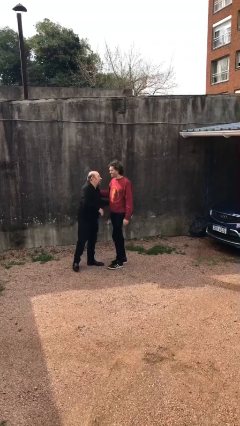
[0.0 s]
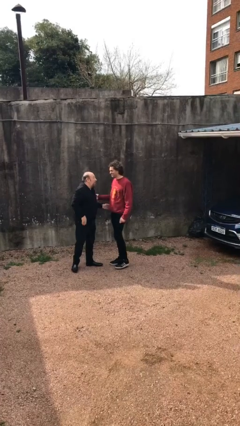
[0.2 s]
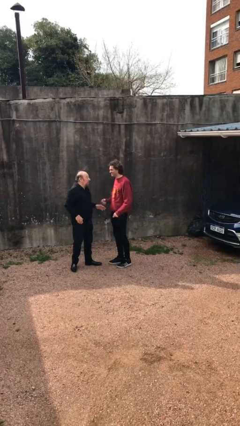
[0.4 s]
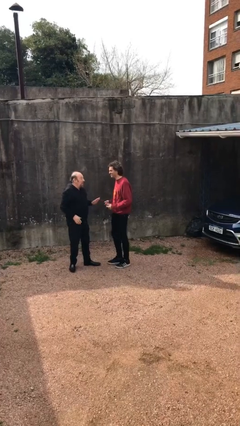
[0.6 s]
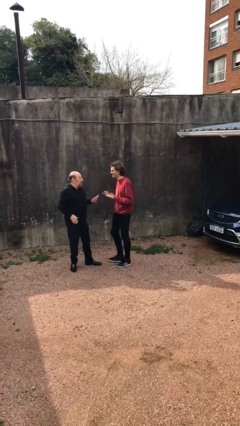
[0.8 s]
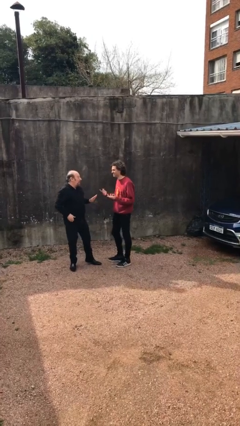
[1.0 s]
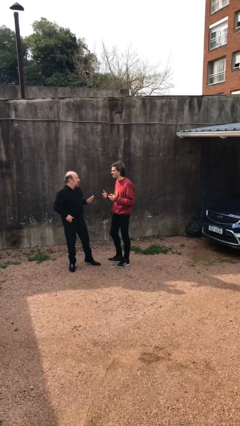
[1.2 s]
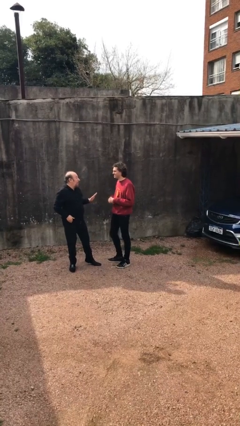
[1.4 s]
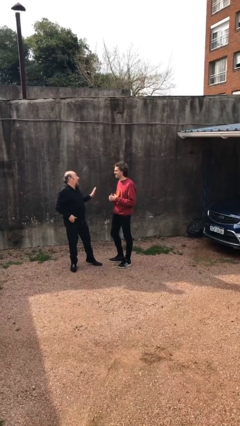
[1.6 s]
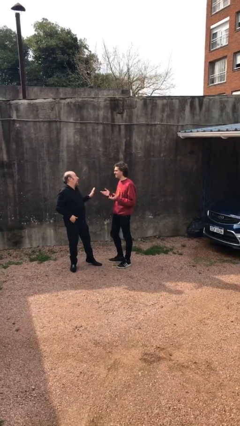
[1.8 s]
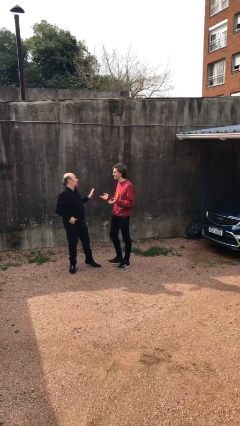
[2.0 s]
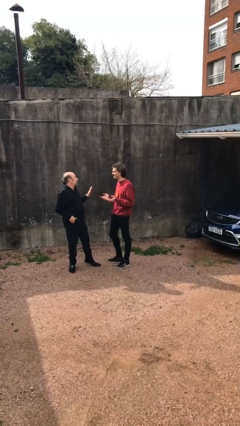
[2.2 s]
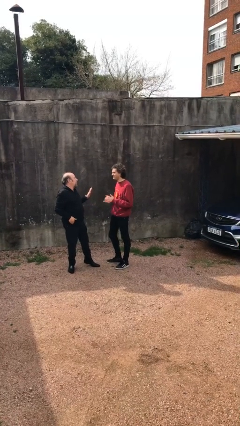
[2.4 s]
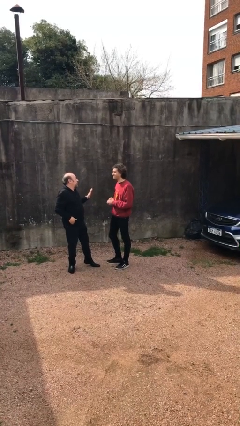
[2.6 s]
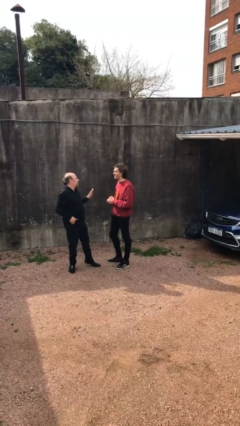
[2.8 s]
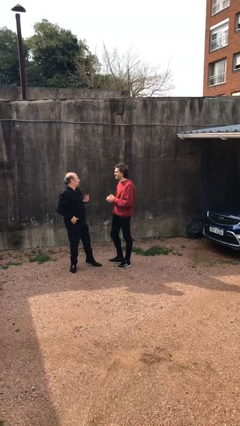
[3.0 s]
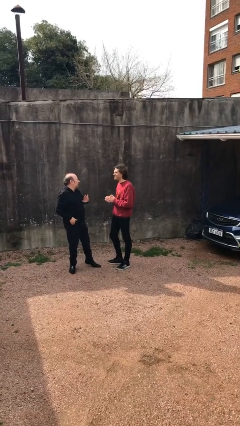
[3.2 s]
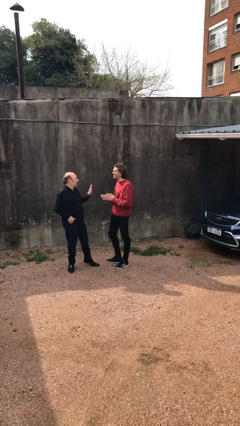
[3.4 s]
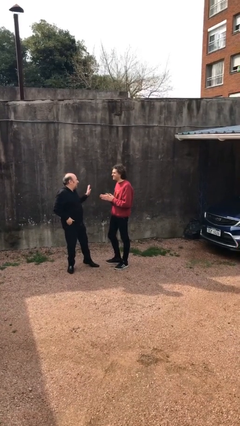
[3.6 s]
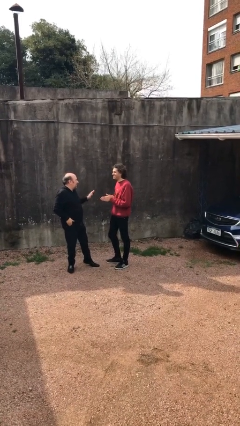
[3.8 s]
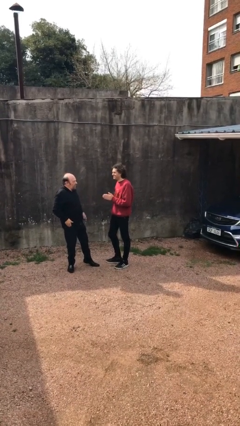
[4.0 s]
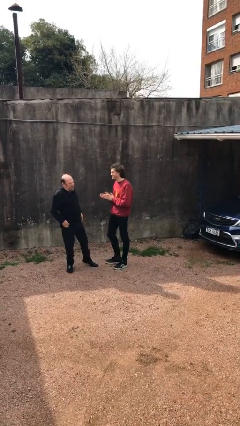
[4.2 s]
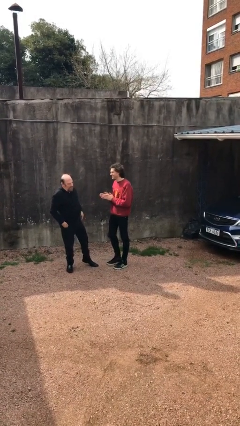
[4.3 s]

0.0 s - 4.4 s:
person talks to person

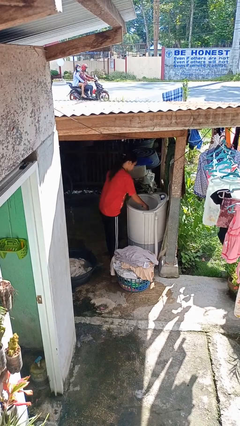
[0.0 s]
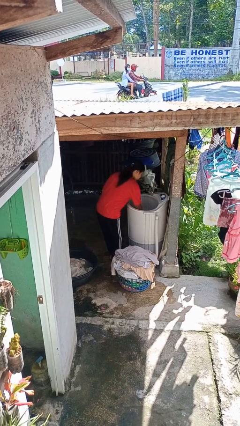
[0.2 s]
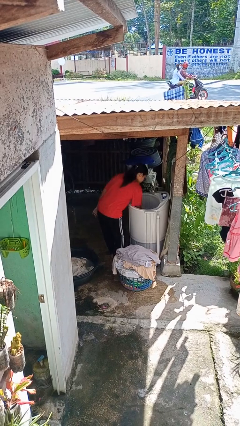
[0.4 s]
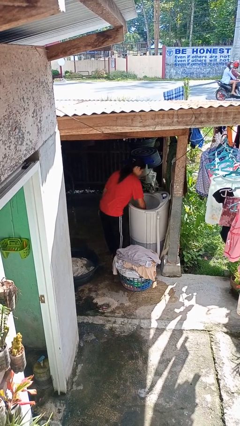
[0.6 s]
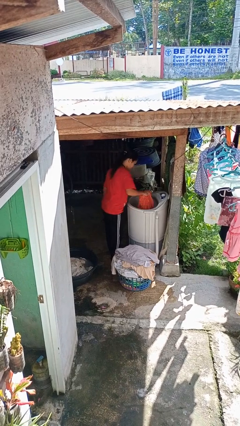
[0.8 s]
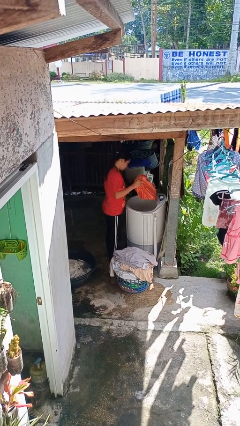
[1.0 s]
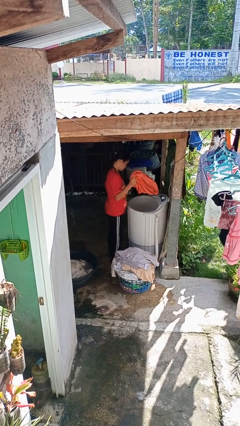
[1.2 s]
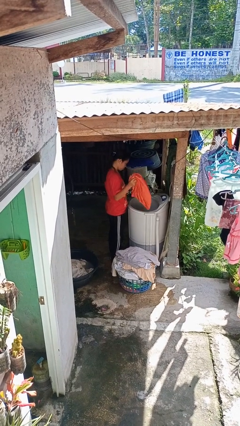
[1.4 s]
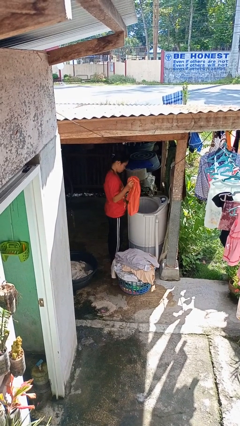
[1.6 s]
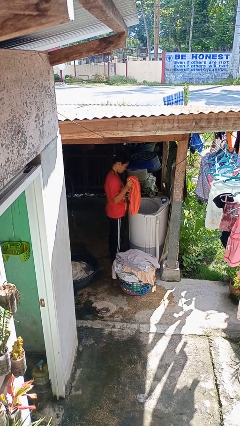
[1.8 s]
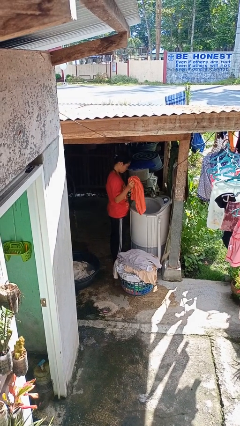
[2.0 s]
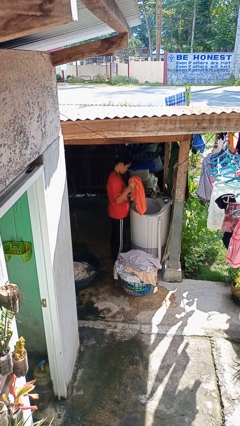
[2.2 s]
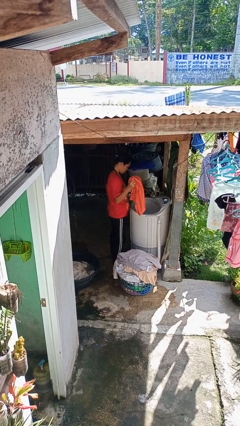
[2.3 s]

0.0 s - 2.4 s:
person unloads clotheswasher

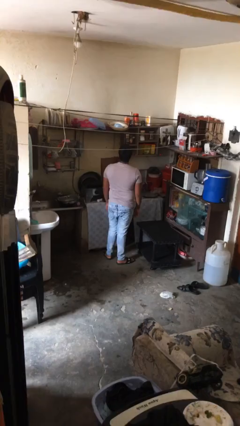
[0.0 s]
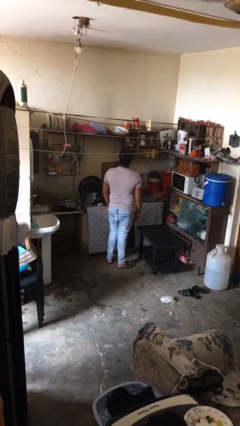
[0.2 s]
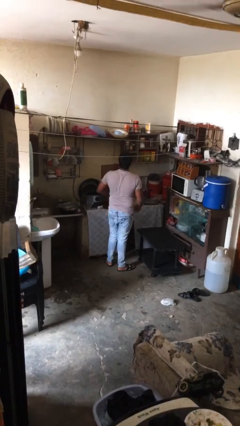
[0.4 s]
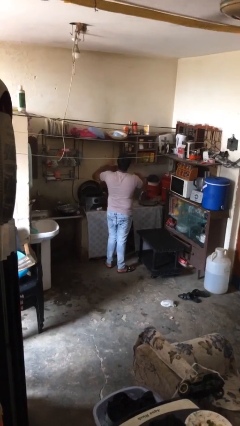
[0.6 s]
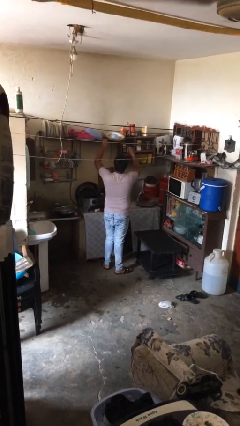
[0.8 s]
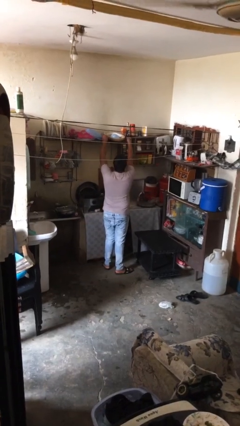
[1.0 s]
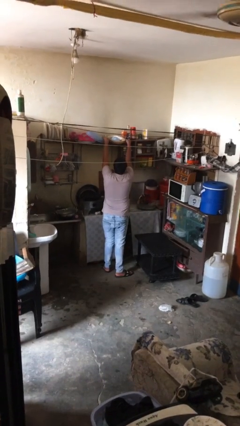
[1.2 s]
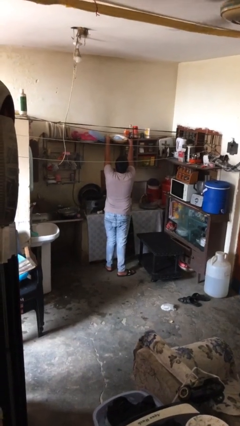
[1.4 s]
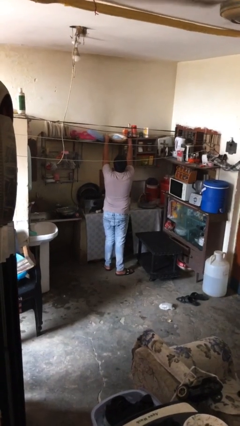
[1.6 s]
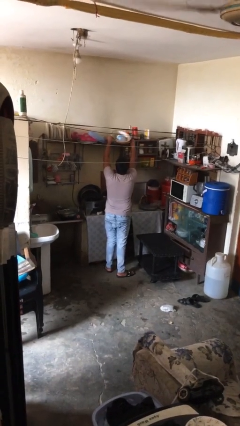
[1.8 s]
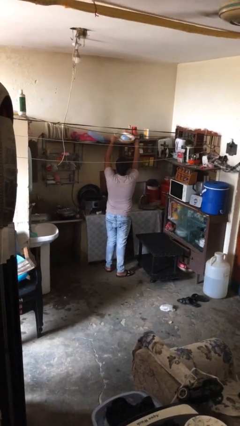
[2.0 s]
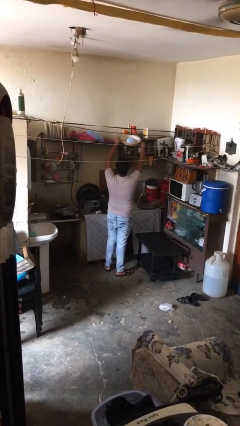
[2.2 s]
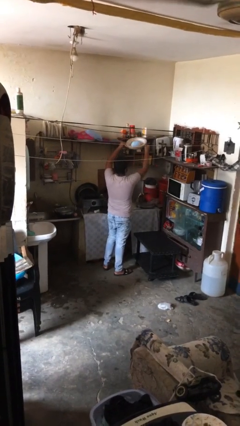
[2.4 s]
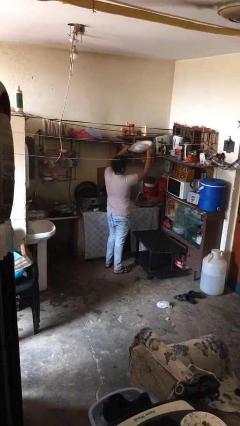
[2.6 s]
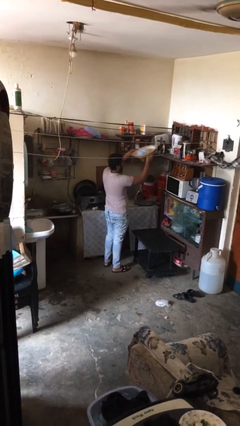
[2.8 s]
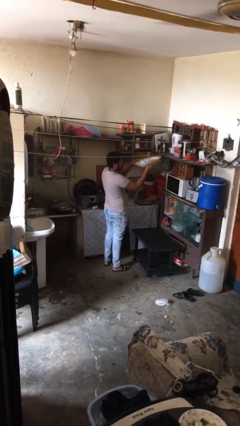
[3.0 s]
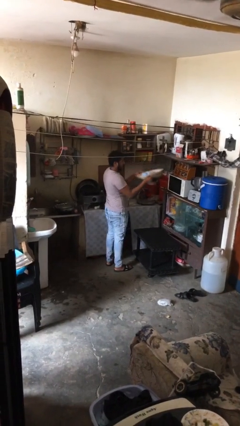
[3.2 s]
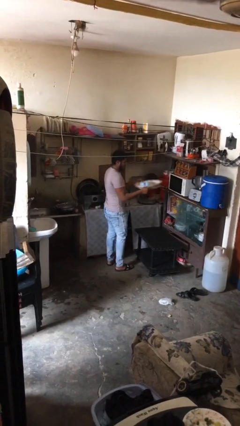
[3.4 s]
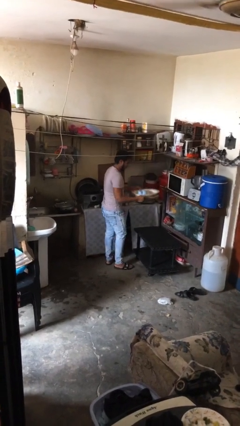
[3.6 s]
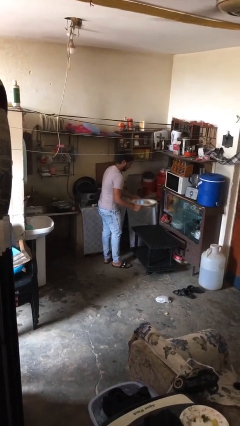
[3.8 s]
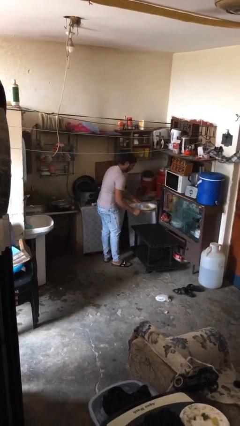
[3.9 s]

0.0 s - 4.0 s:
person picks up object from shelf

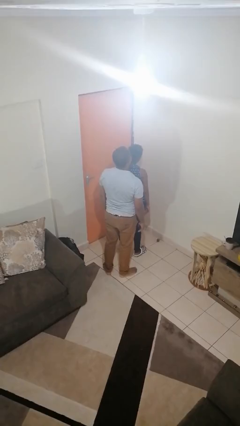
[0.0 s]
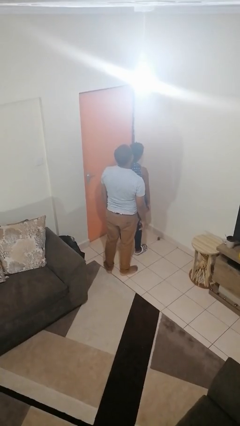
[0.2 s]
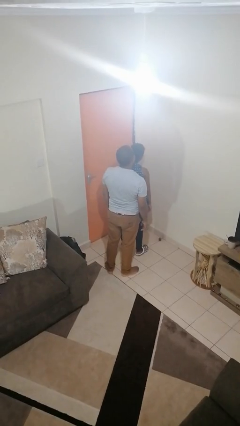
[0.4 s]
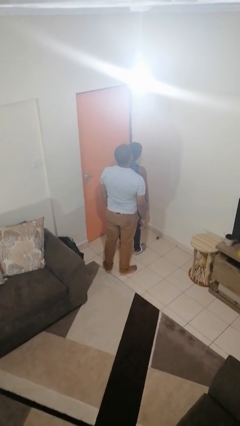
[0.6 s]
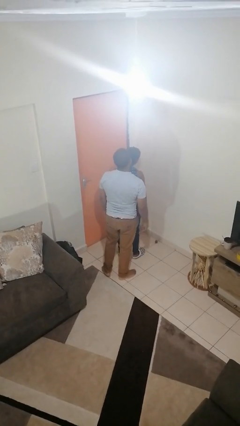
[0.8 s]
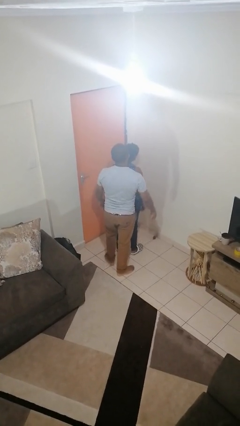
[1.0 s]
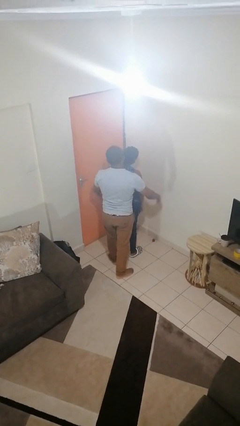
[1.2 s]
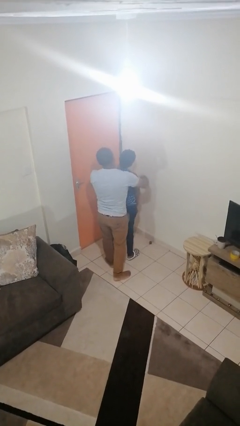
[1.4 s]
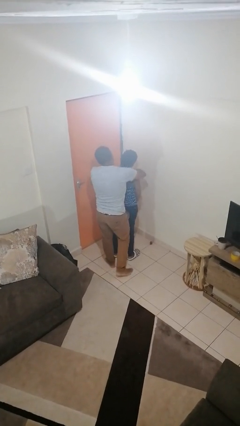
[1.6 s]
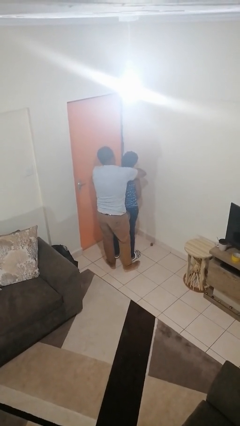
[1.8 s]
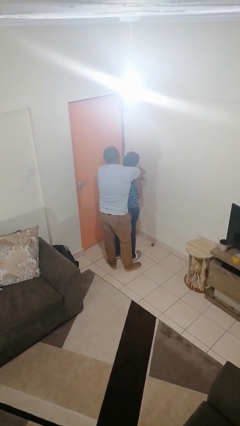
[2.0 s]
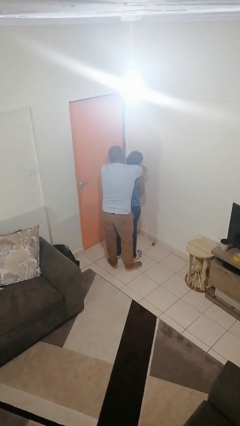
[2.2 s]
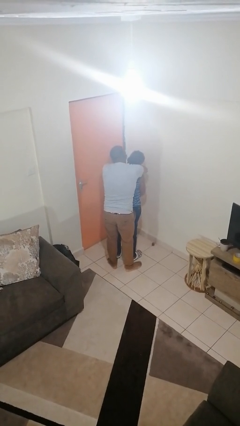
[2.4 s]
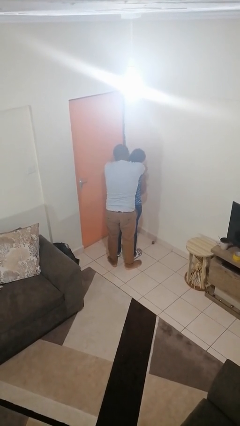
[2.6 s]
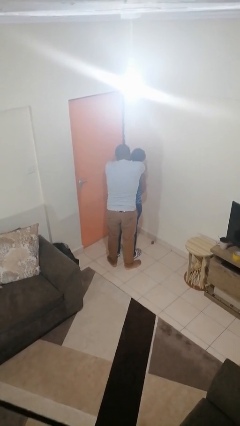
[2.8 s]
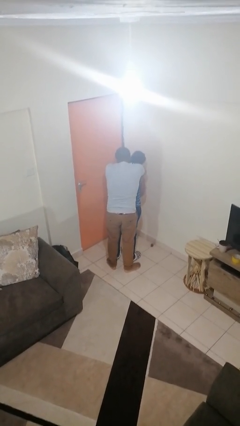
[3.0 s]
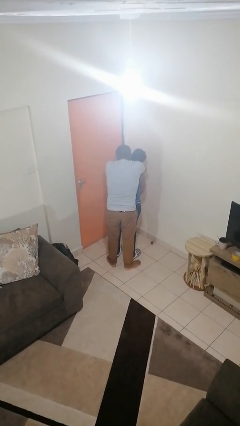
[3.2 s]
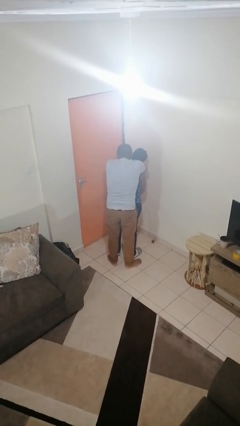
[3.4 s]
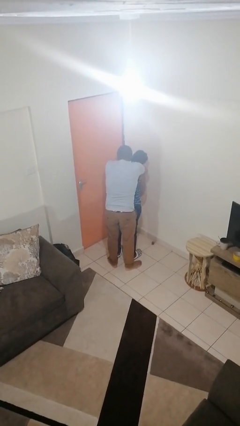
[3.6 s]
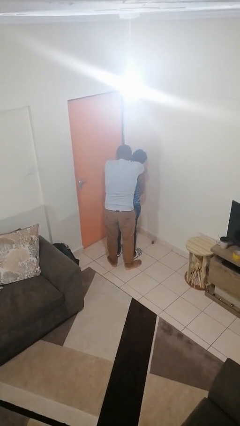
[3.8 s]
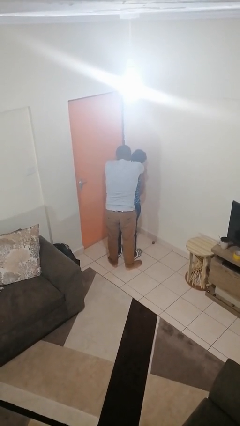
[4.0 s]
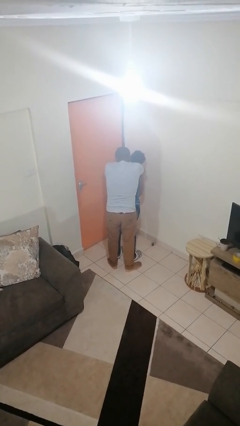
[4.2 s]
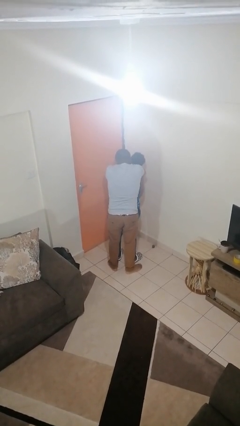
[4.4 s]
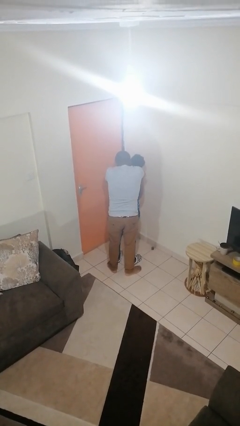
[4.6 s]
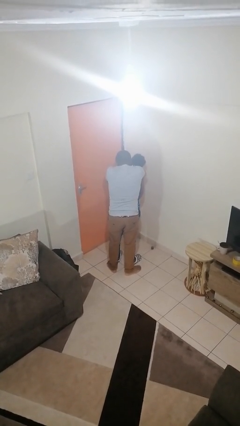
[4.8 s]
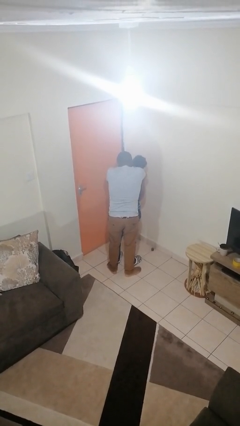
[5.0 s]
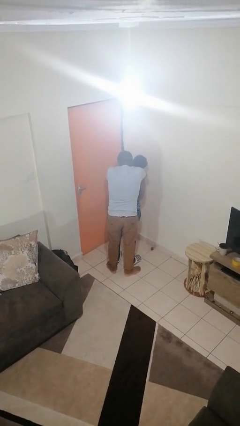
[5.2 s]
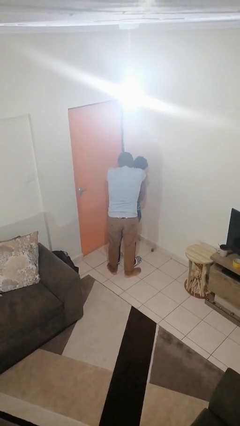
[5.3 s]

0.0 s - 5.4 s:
person hugs person from behind

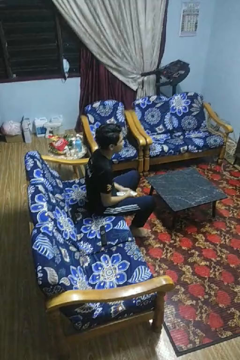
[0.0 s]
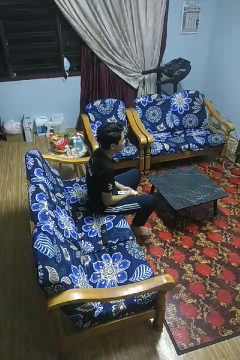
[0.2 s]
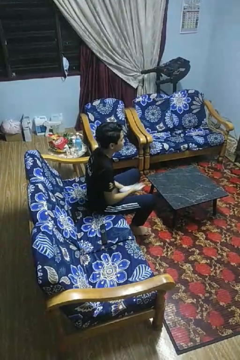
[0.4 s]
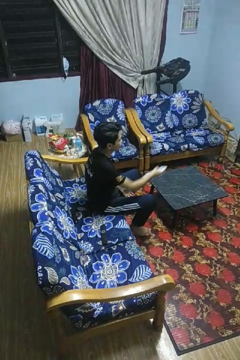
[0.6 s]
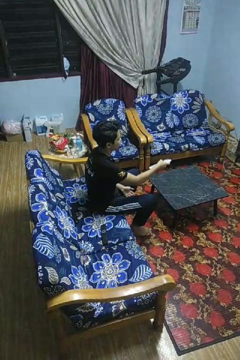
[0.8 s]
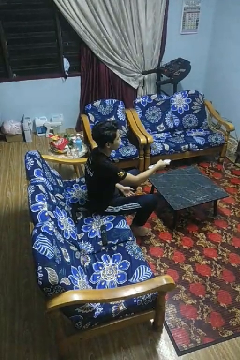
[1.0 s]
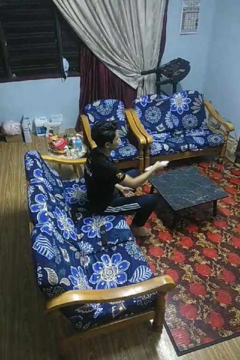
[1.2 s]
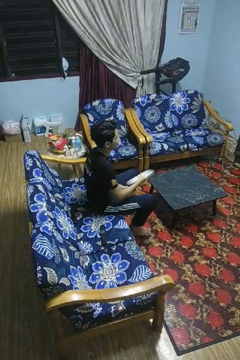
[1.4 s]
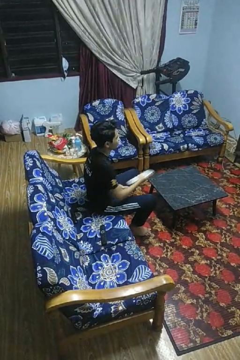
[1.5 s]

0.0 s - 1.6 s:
person uses television remote
